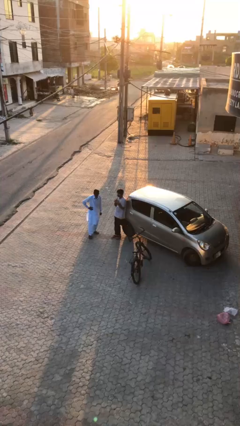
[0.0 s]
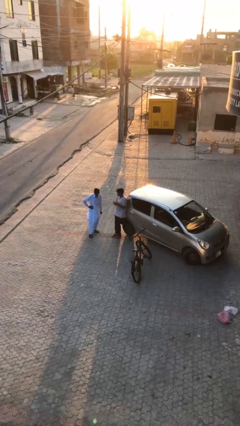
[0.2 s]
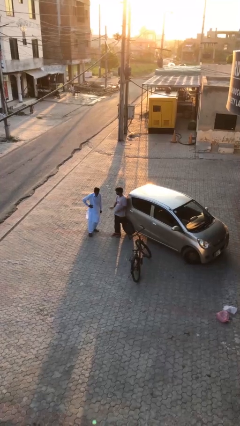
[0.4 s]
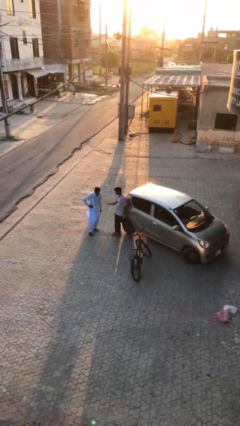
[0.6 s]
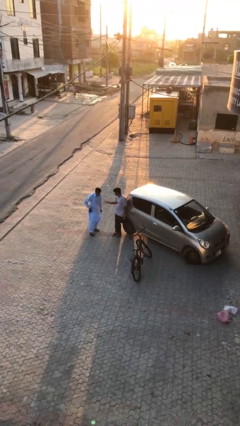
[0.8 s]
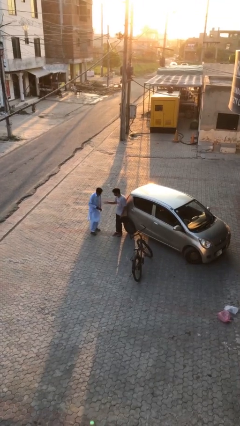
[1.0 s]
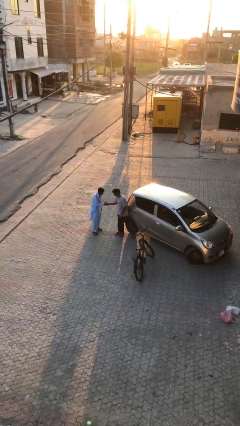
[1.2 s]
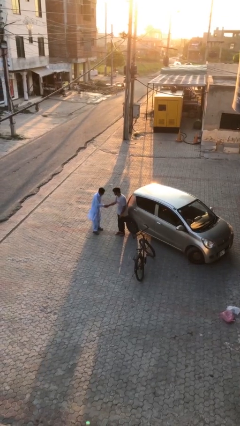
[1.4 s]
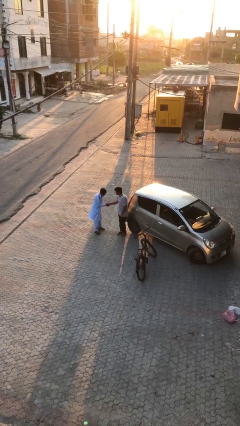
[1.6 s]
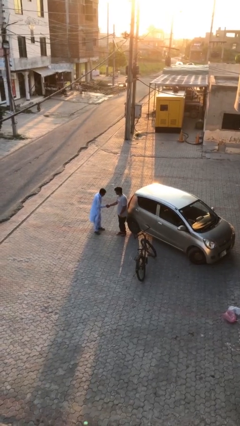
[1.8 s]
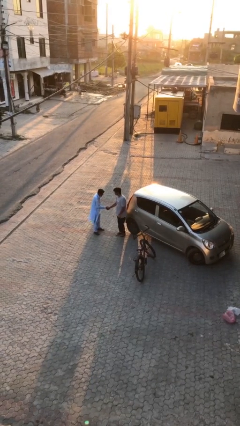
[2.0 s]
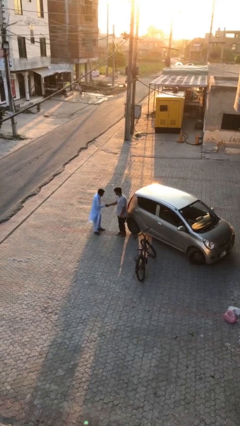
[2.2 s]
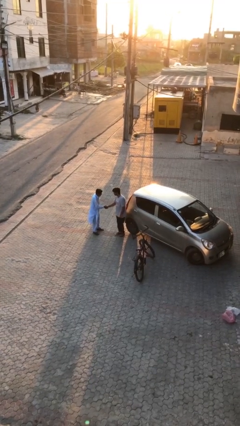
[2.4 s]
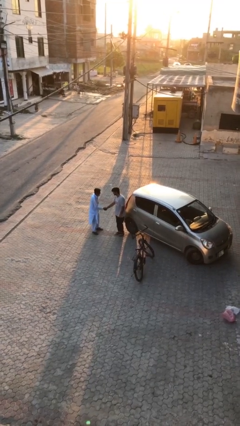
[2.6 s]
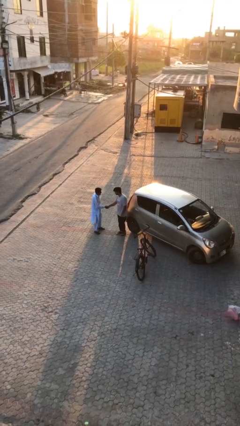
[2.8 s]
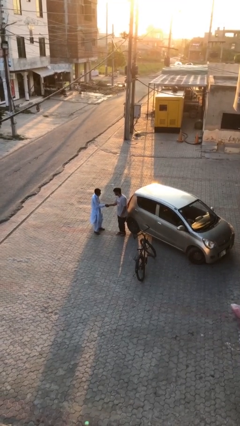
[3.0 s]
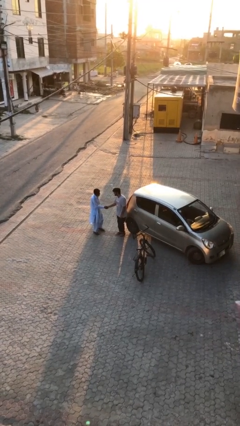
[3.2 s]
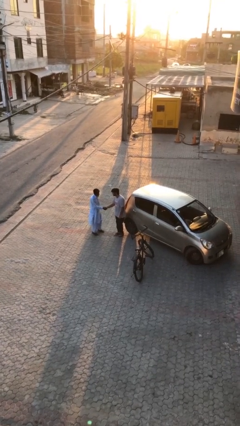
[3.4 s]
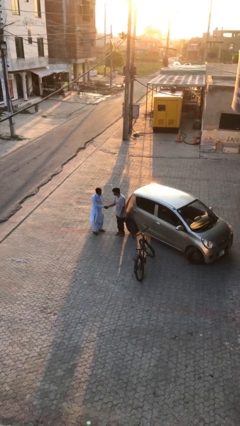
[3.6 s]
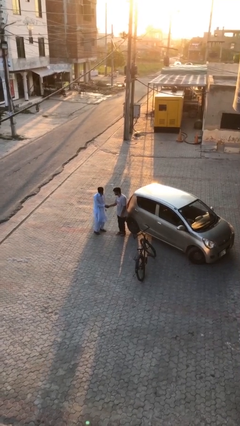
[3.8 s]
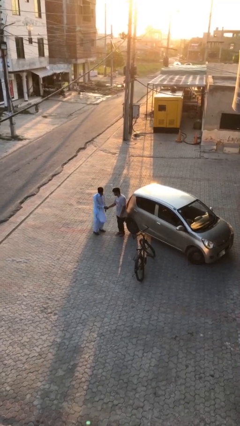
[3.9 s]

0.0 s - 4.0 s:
person shakes hand

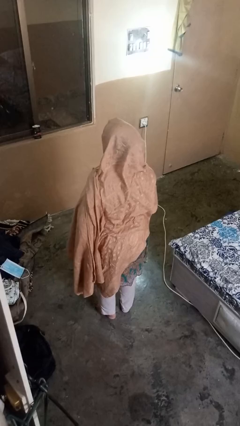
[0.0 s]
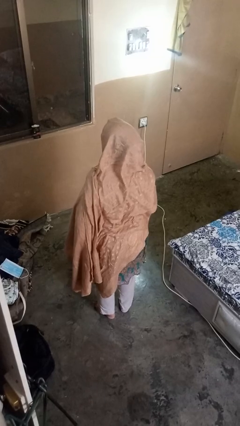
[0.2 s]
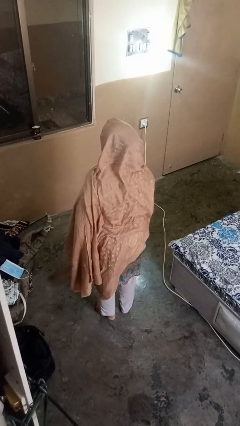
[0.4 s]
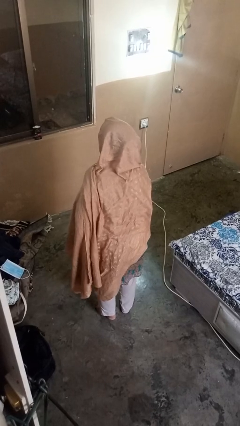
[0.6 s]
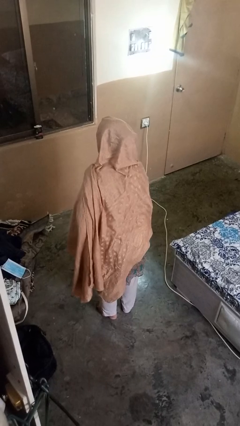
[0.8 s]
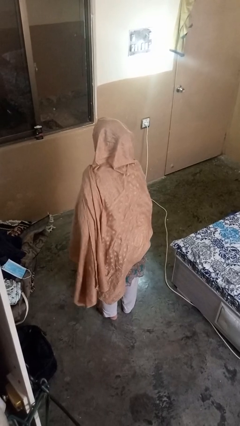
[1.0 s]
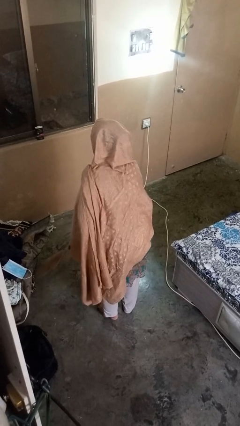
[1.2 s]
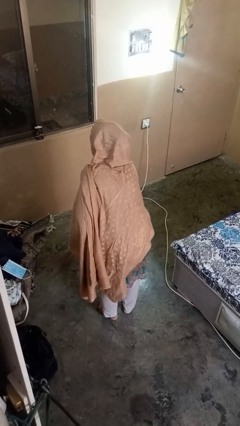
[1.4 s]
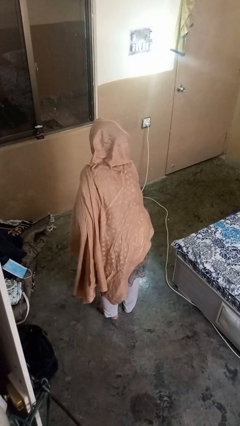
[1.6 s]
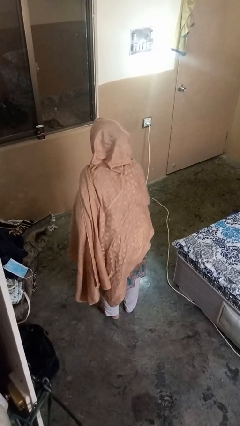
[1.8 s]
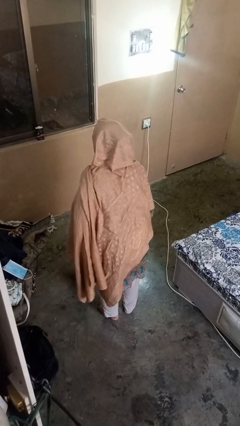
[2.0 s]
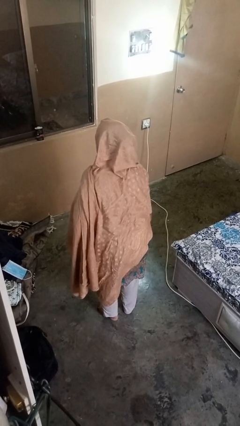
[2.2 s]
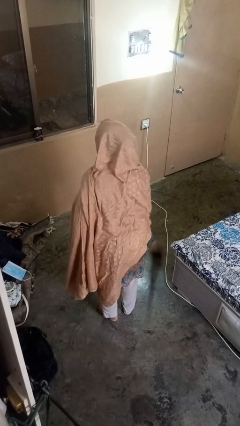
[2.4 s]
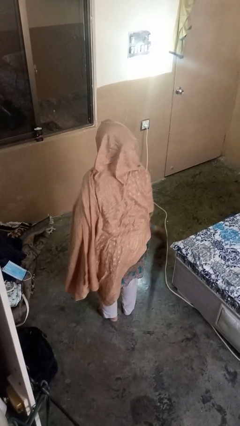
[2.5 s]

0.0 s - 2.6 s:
person sweeps floor

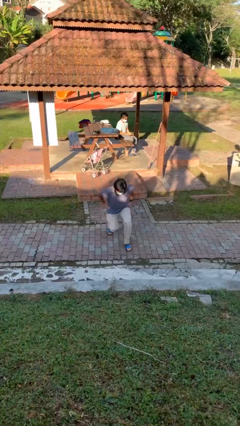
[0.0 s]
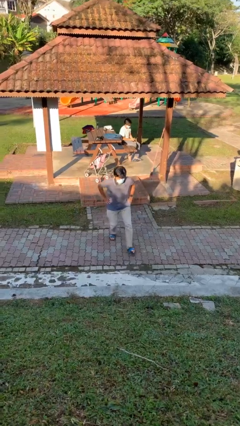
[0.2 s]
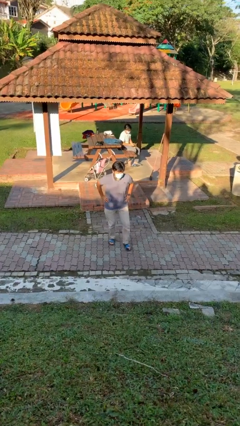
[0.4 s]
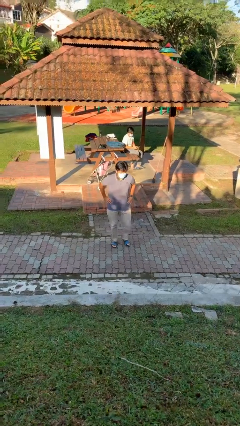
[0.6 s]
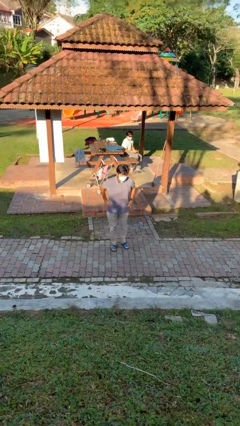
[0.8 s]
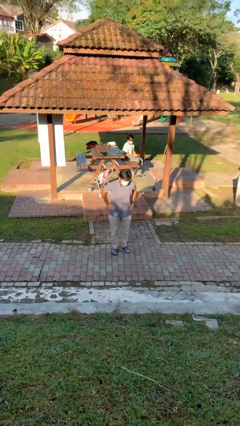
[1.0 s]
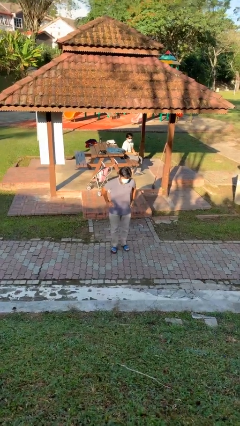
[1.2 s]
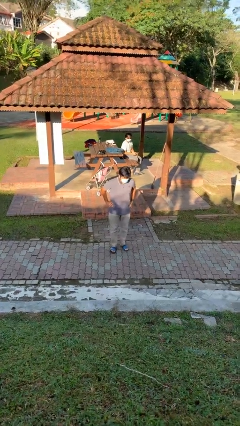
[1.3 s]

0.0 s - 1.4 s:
person stands up from floor

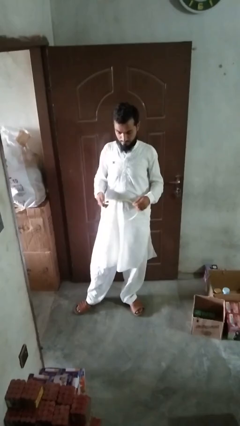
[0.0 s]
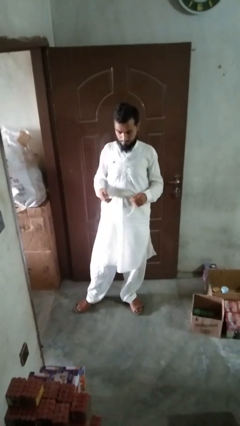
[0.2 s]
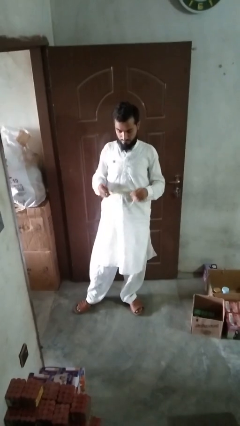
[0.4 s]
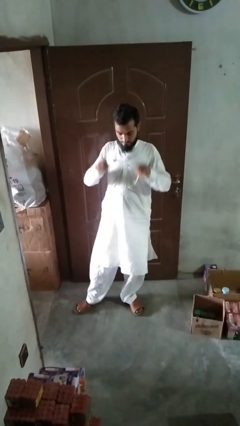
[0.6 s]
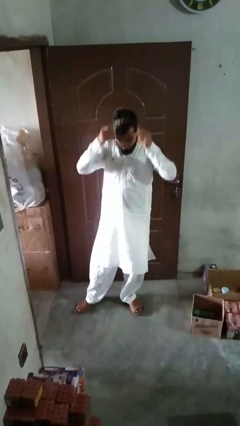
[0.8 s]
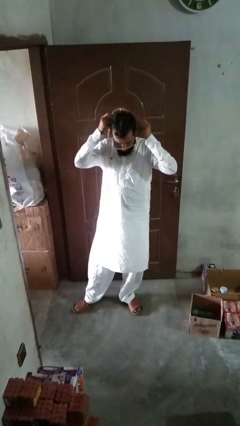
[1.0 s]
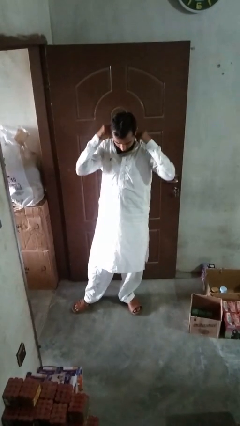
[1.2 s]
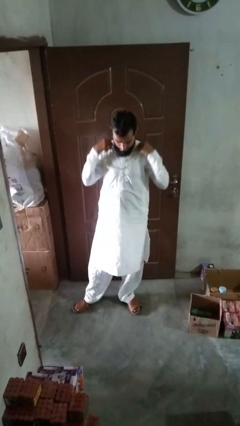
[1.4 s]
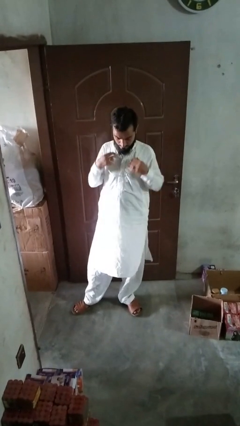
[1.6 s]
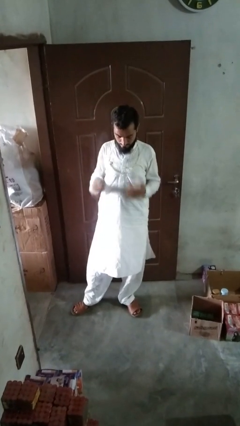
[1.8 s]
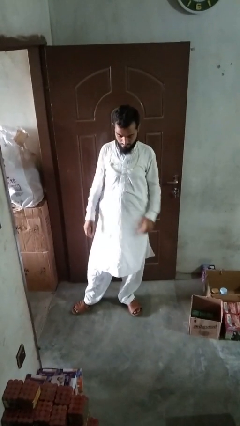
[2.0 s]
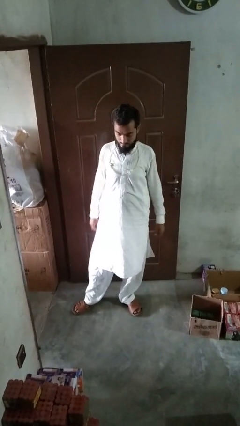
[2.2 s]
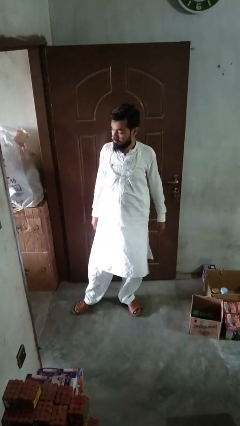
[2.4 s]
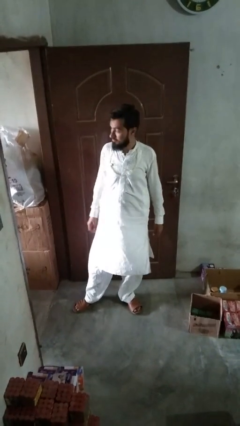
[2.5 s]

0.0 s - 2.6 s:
person puts on necklace

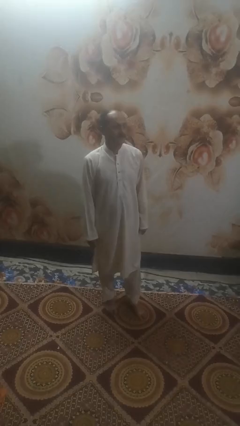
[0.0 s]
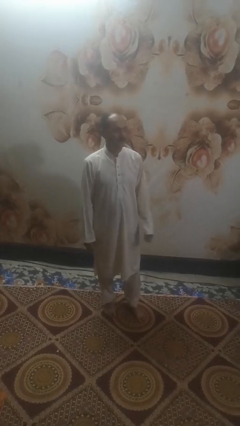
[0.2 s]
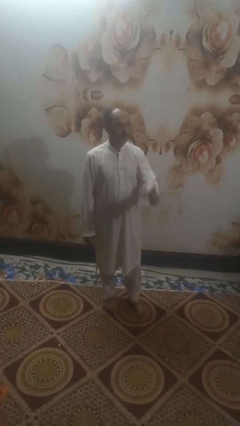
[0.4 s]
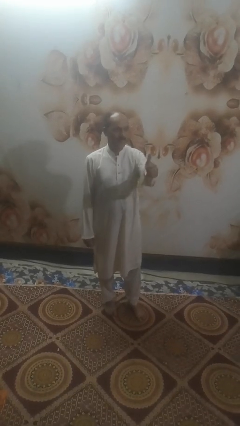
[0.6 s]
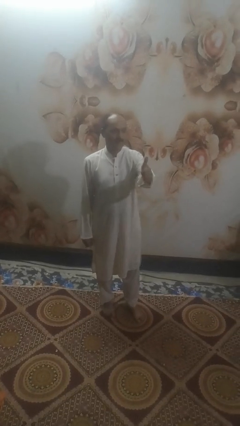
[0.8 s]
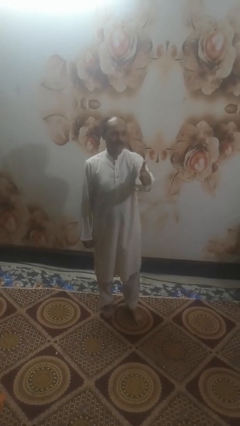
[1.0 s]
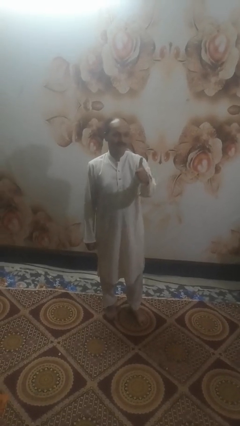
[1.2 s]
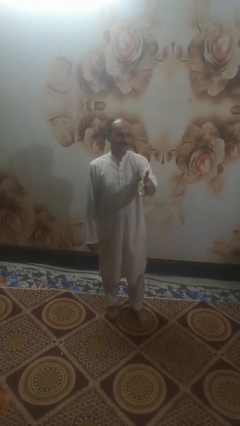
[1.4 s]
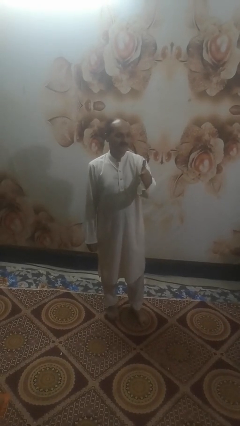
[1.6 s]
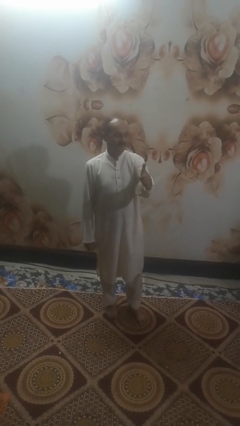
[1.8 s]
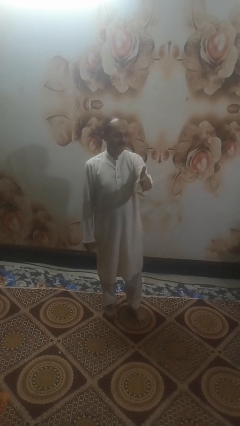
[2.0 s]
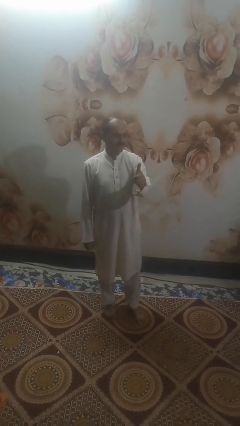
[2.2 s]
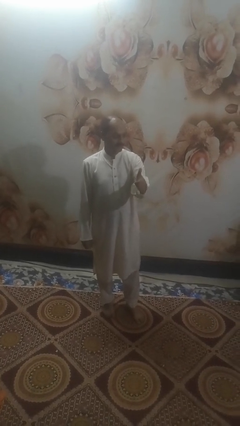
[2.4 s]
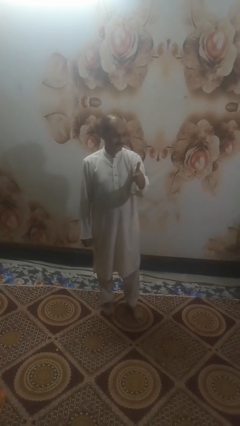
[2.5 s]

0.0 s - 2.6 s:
person gestures thumbs up

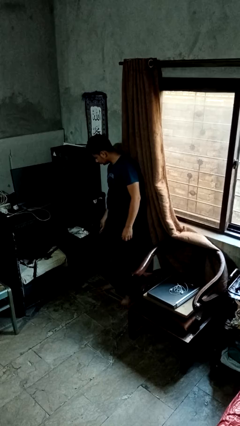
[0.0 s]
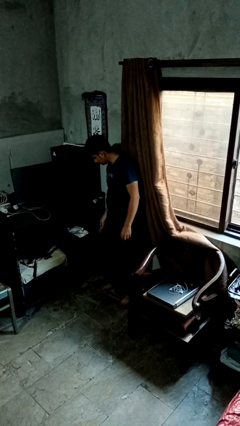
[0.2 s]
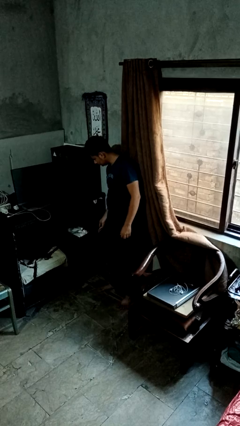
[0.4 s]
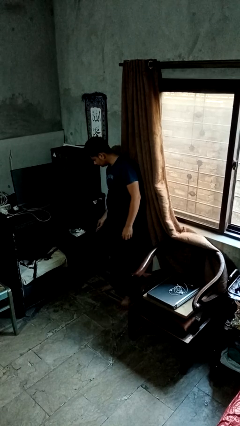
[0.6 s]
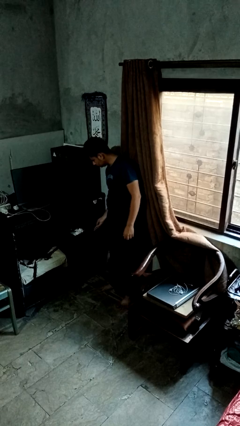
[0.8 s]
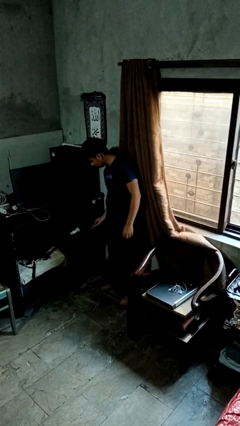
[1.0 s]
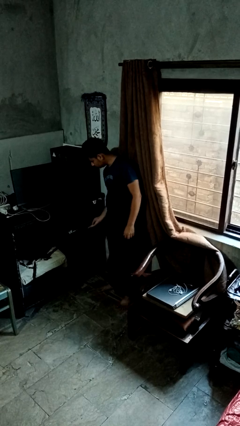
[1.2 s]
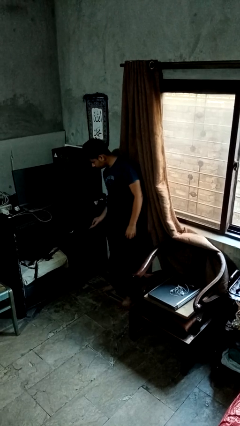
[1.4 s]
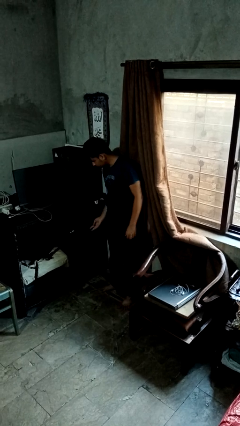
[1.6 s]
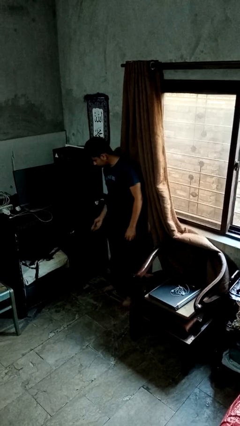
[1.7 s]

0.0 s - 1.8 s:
person closes dresser drawer

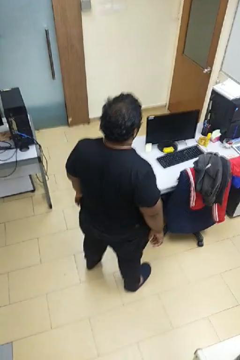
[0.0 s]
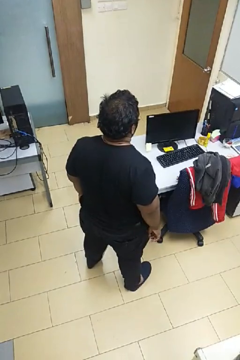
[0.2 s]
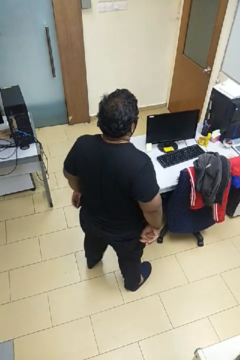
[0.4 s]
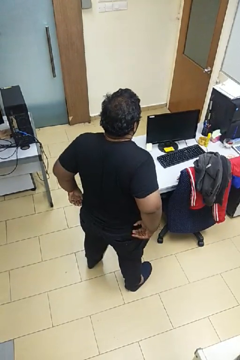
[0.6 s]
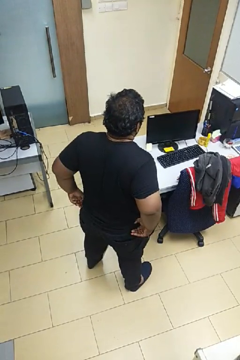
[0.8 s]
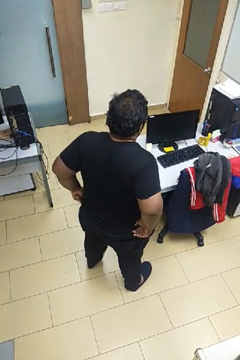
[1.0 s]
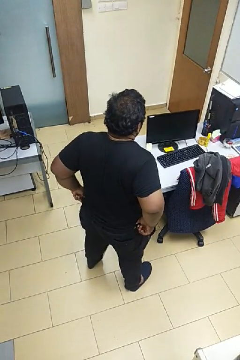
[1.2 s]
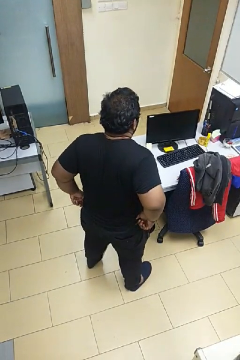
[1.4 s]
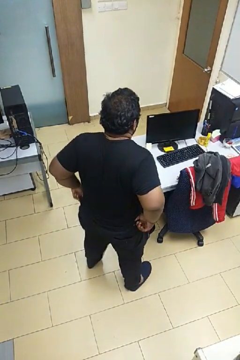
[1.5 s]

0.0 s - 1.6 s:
person hikes up pants

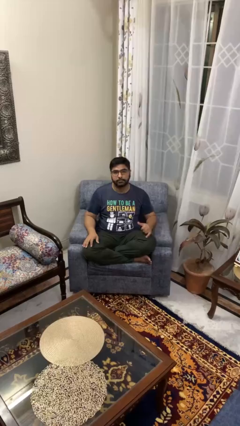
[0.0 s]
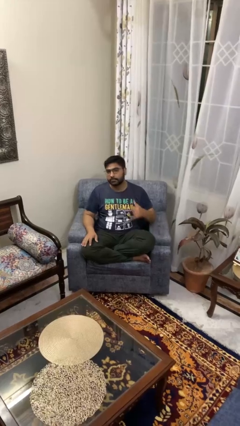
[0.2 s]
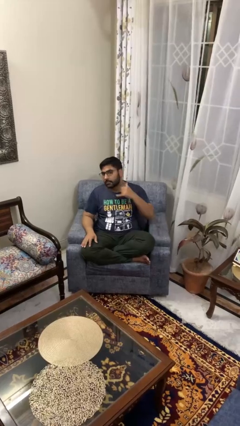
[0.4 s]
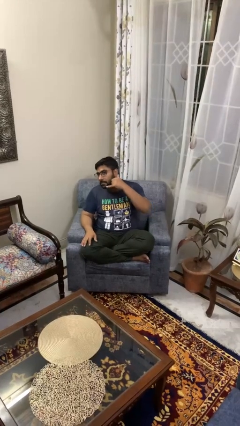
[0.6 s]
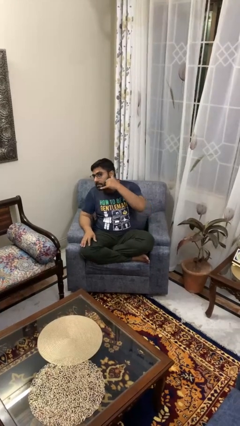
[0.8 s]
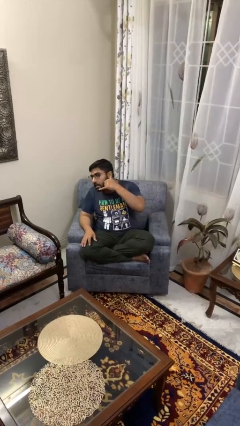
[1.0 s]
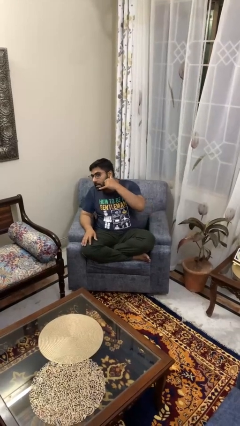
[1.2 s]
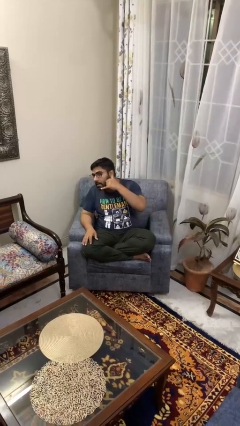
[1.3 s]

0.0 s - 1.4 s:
person gestures call me
